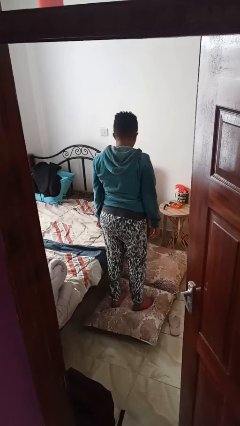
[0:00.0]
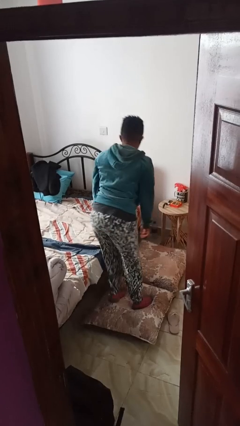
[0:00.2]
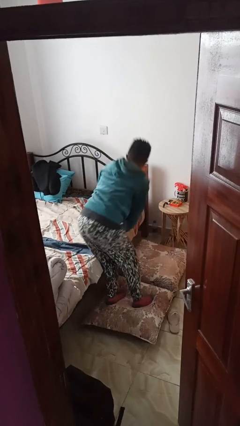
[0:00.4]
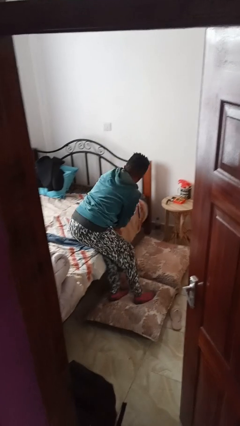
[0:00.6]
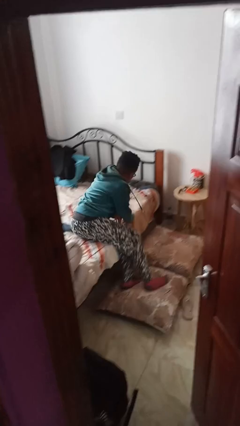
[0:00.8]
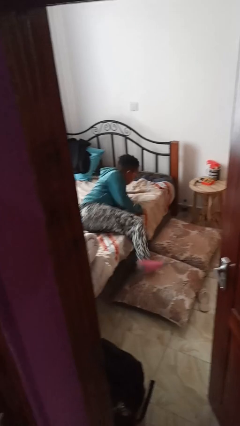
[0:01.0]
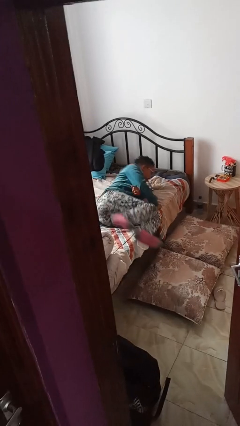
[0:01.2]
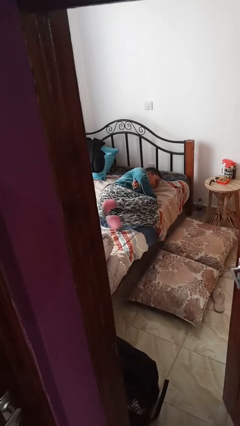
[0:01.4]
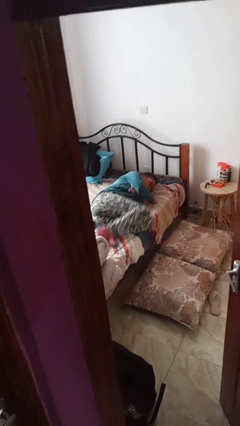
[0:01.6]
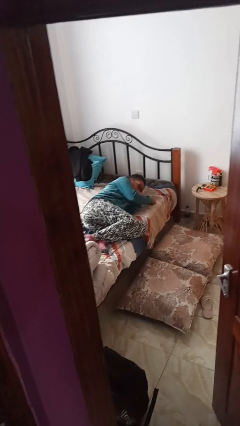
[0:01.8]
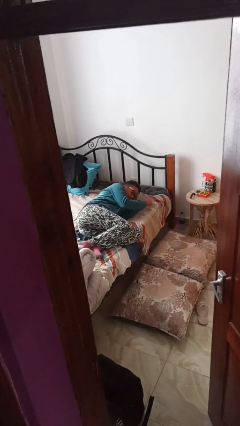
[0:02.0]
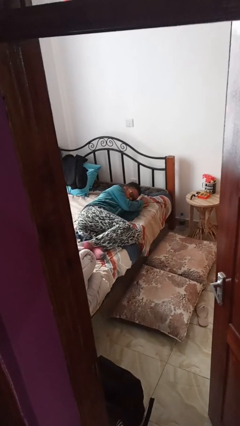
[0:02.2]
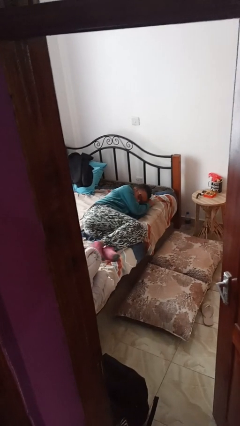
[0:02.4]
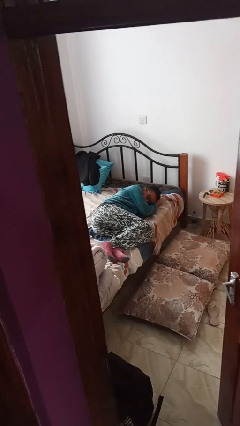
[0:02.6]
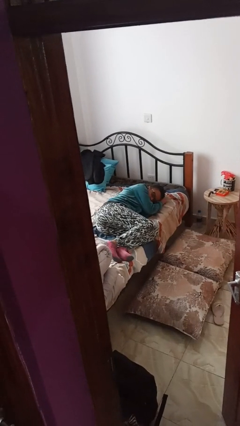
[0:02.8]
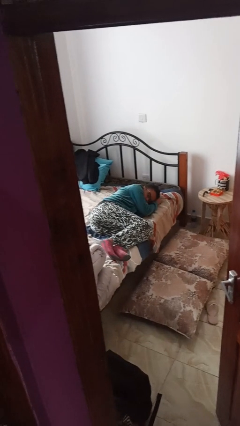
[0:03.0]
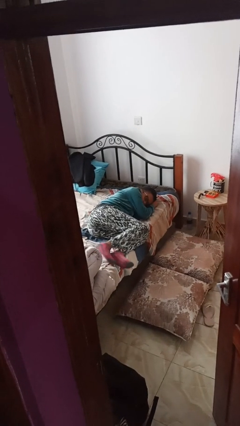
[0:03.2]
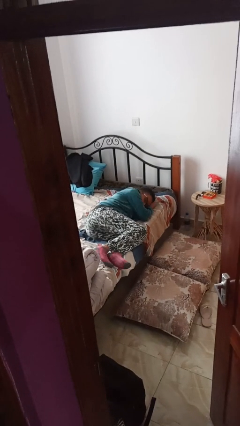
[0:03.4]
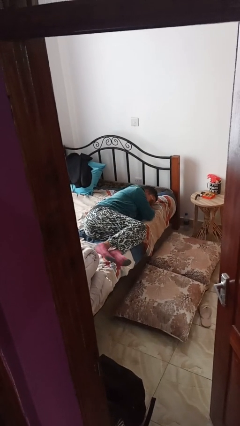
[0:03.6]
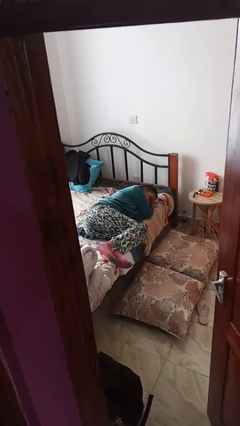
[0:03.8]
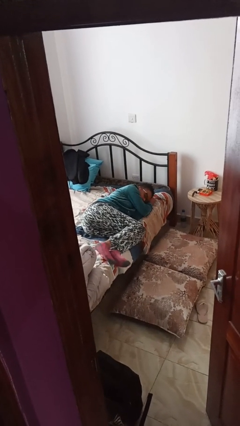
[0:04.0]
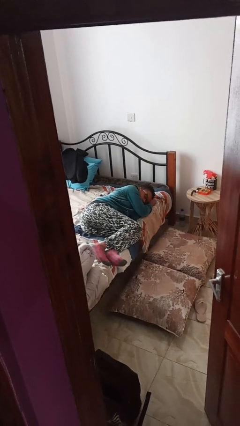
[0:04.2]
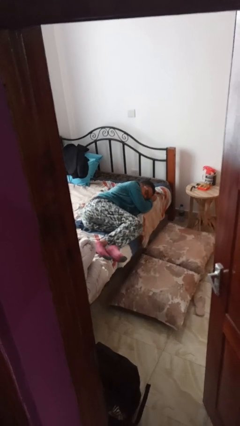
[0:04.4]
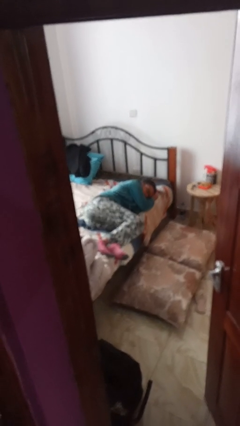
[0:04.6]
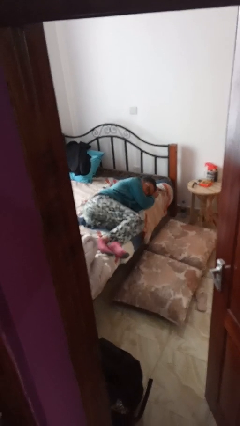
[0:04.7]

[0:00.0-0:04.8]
person lies down on bed

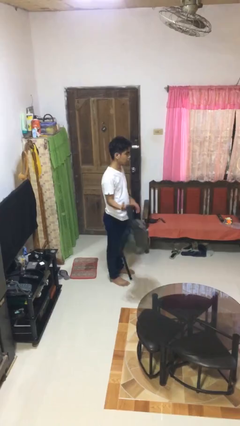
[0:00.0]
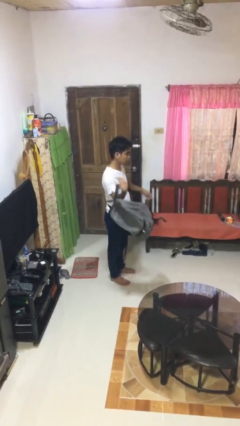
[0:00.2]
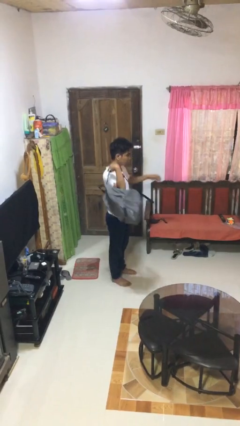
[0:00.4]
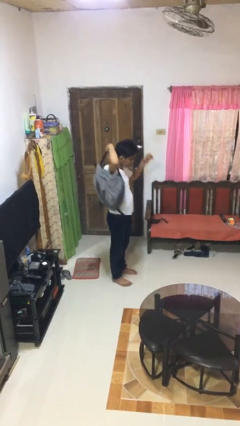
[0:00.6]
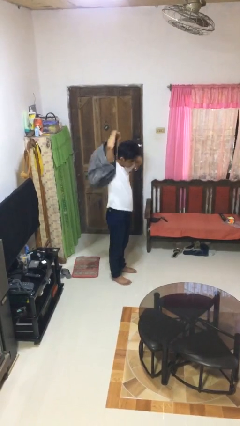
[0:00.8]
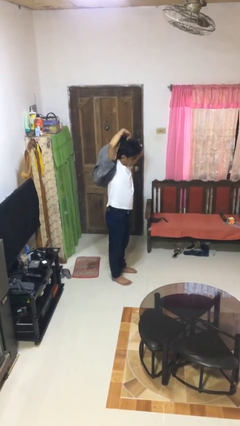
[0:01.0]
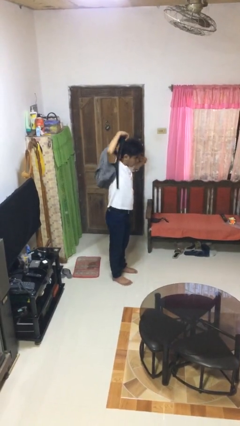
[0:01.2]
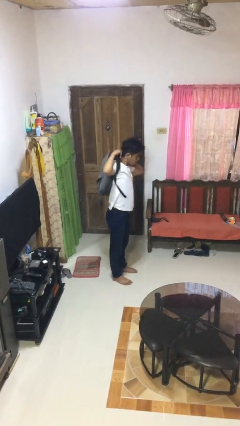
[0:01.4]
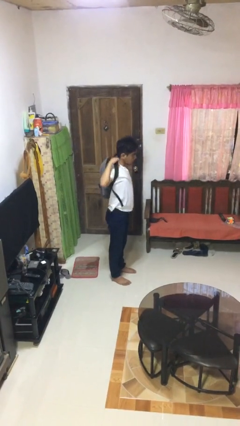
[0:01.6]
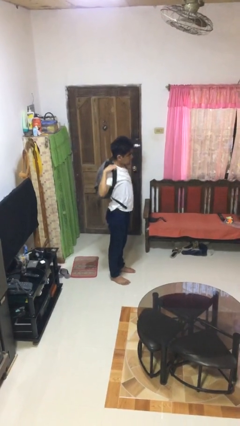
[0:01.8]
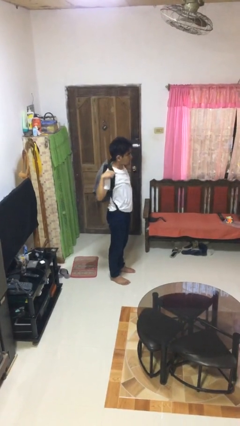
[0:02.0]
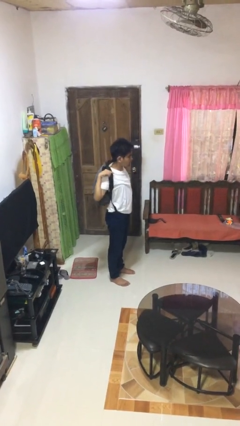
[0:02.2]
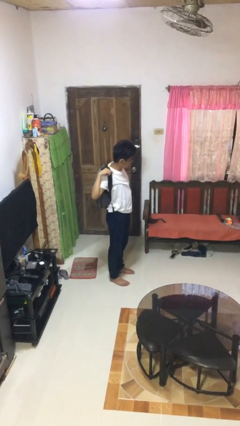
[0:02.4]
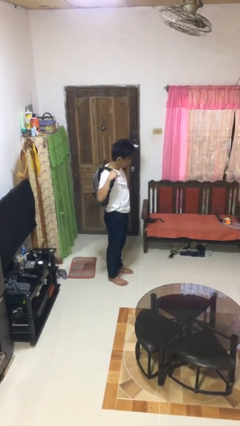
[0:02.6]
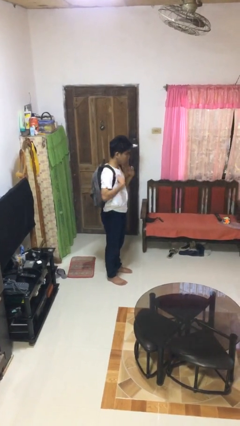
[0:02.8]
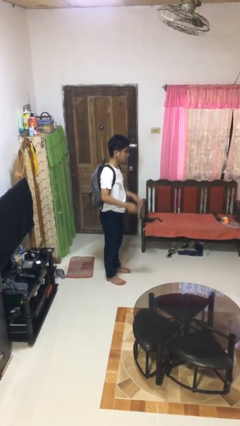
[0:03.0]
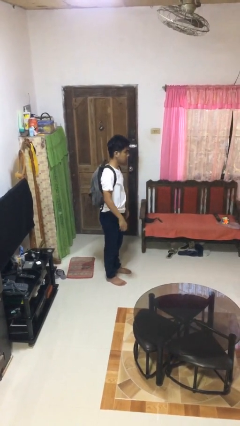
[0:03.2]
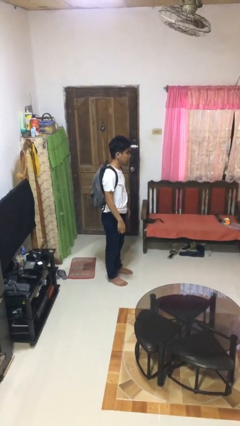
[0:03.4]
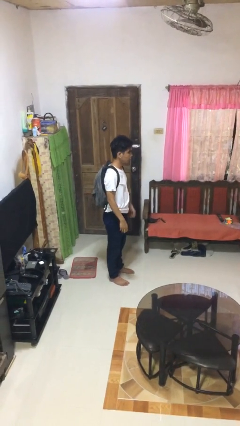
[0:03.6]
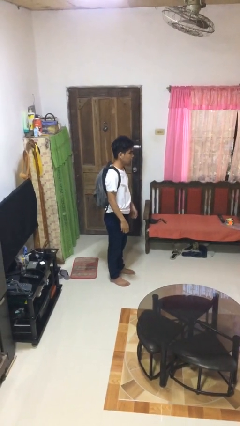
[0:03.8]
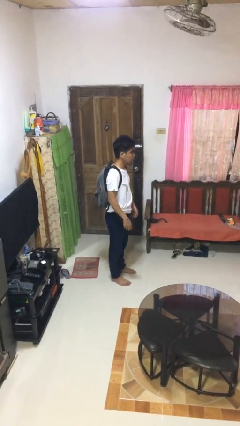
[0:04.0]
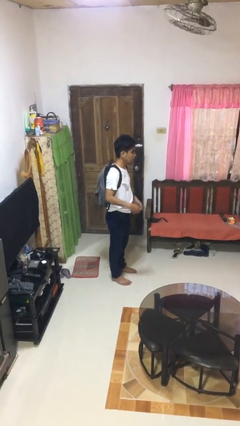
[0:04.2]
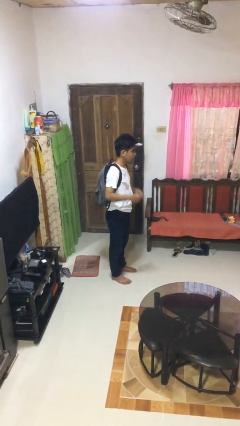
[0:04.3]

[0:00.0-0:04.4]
person puts on backpack

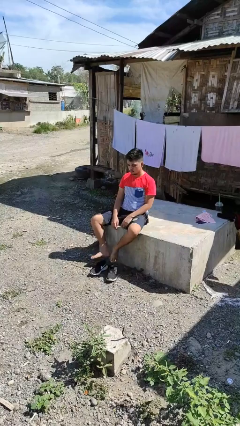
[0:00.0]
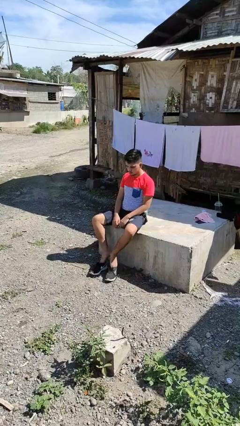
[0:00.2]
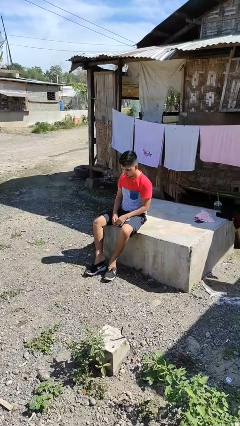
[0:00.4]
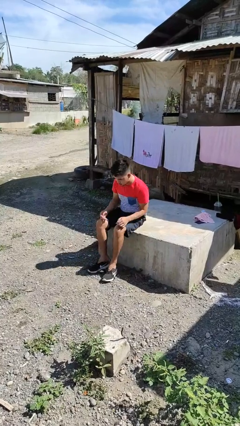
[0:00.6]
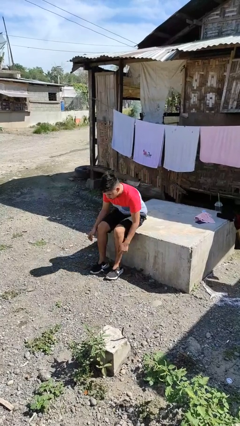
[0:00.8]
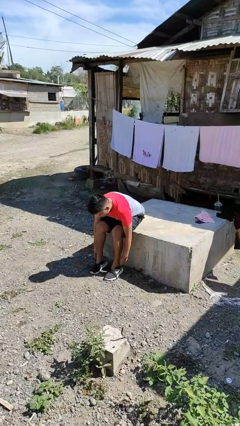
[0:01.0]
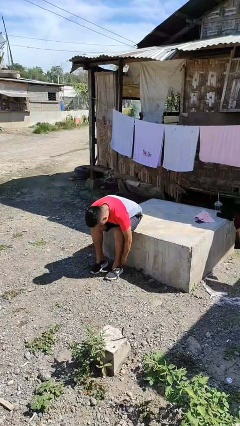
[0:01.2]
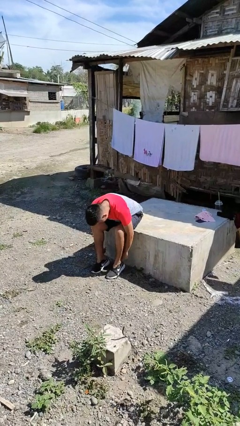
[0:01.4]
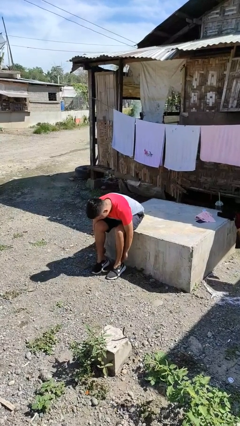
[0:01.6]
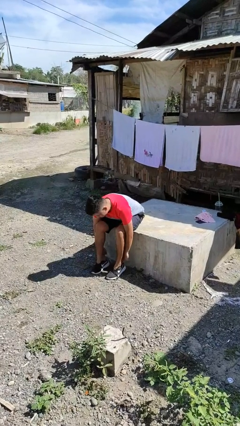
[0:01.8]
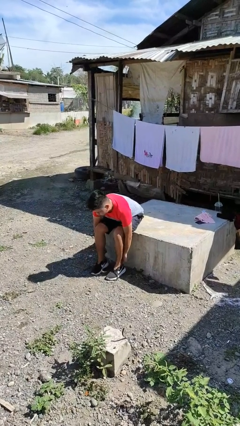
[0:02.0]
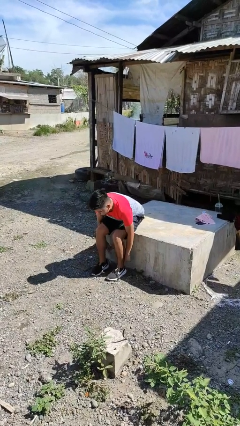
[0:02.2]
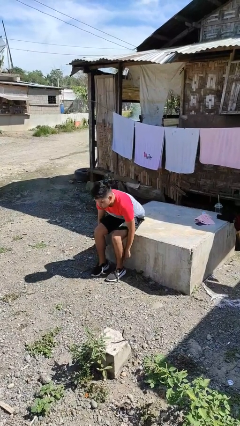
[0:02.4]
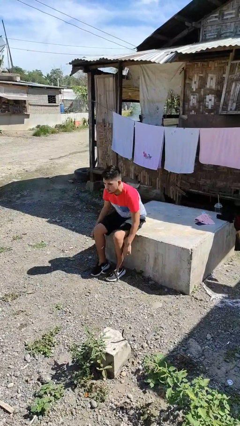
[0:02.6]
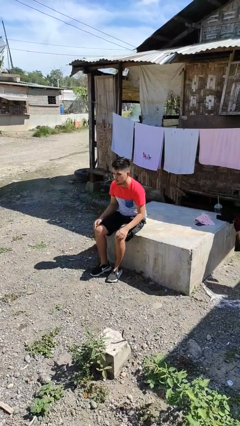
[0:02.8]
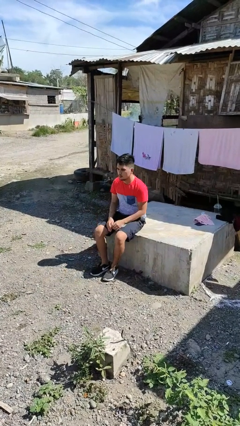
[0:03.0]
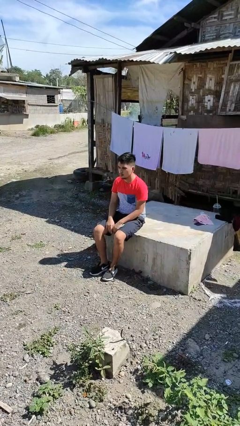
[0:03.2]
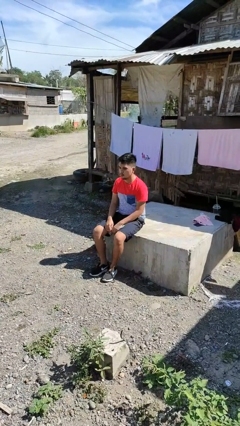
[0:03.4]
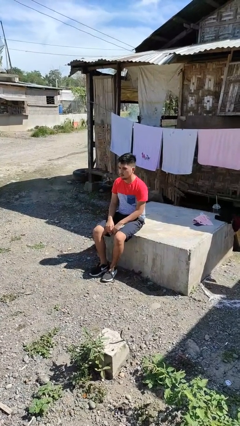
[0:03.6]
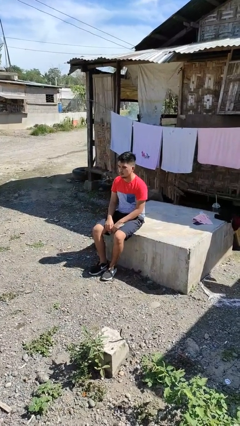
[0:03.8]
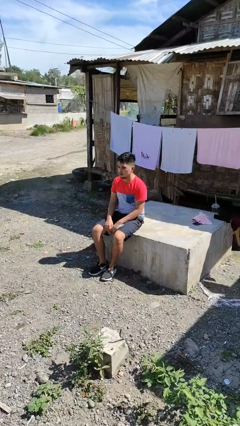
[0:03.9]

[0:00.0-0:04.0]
person puts on shoes

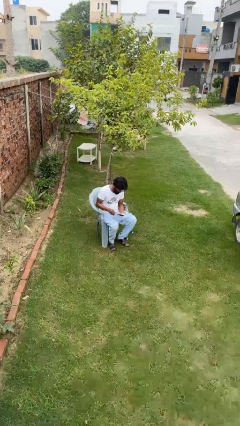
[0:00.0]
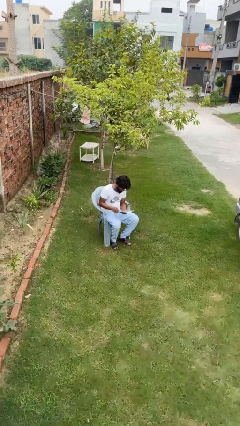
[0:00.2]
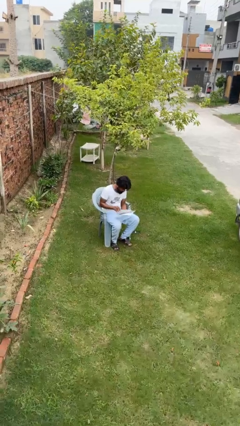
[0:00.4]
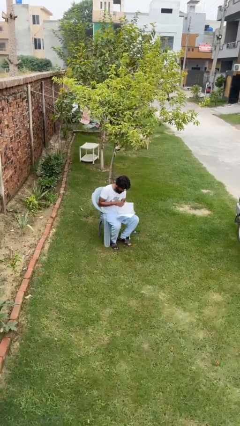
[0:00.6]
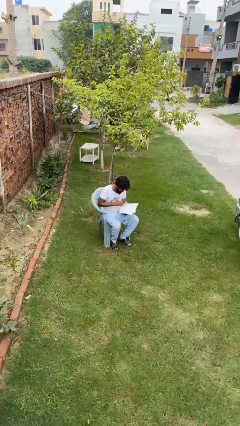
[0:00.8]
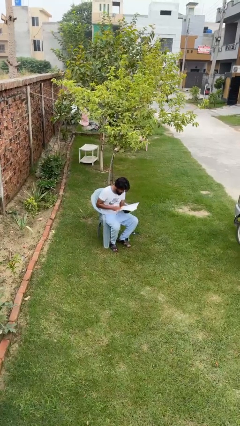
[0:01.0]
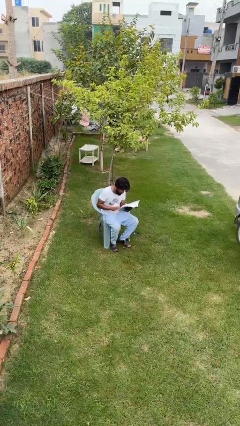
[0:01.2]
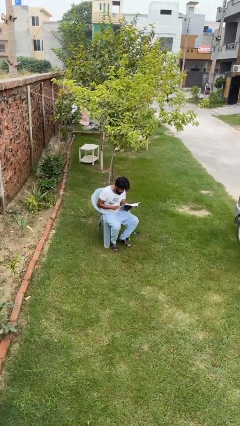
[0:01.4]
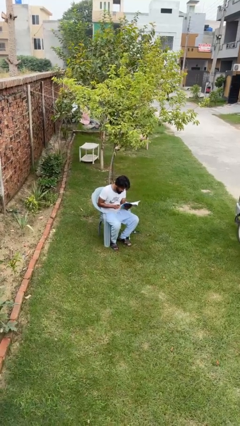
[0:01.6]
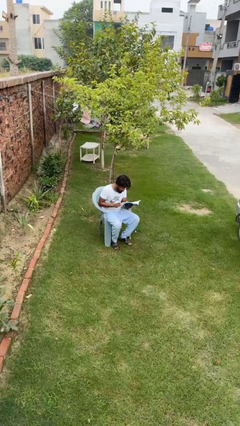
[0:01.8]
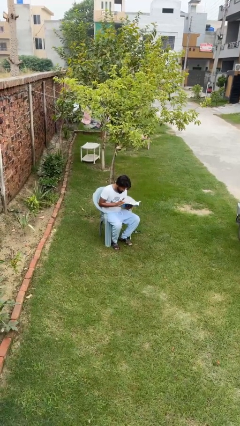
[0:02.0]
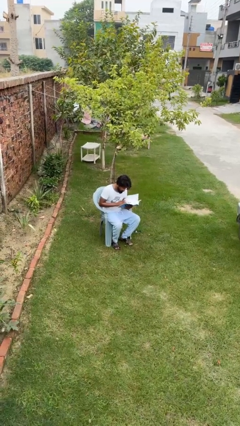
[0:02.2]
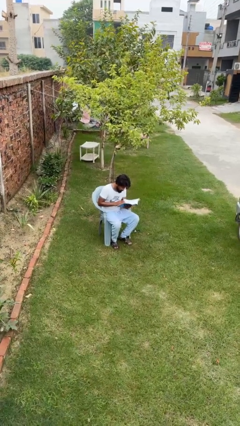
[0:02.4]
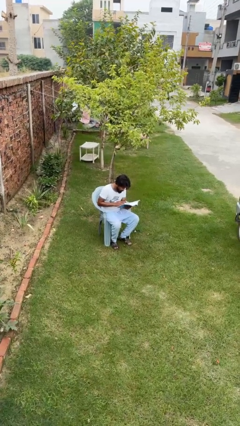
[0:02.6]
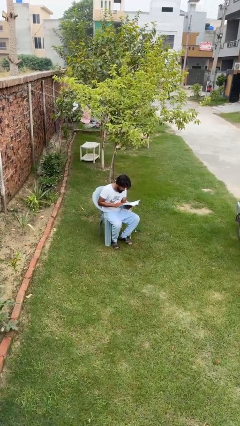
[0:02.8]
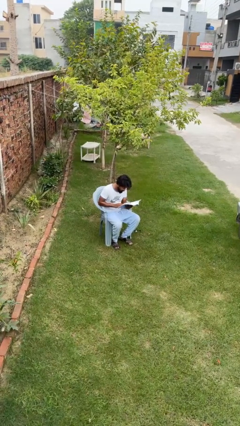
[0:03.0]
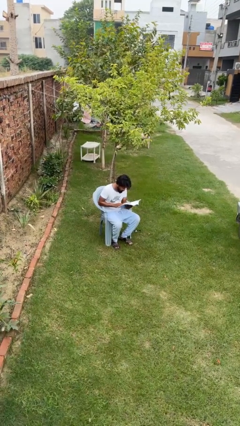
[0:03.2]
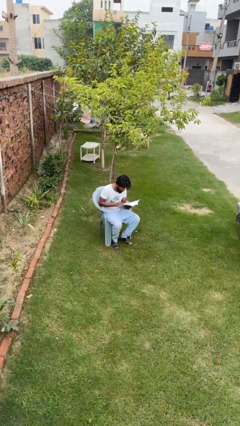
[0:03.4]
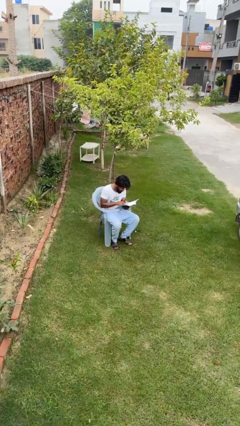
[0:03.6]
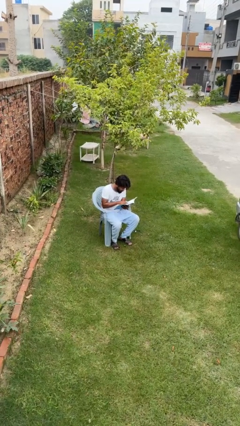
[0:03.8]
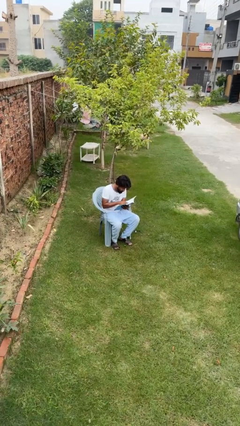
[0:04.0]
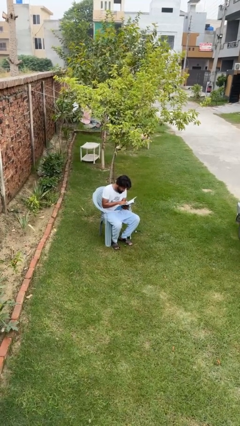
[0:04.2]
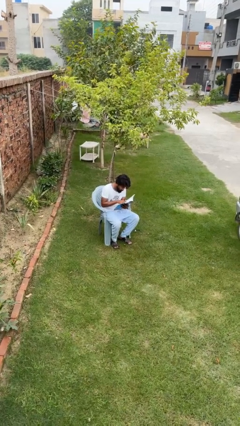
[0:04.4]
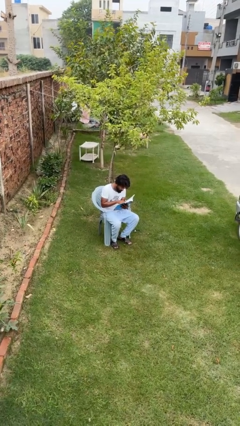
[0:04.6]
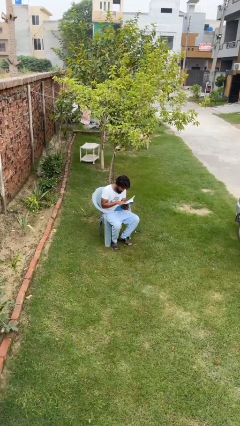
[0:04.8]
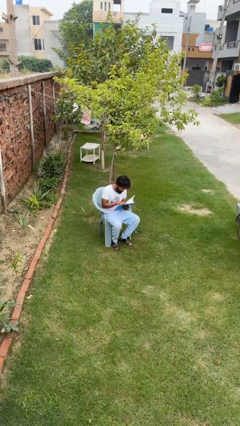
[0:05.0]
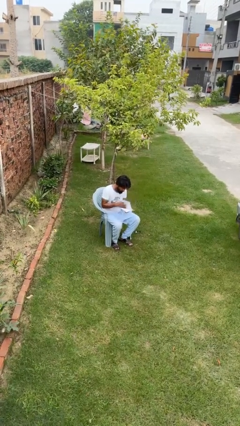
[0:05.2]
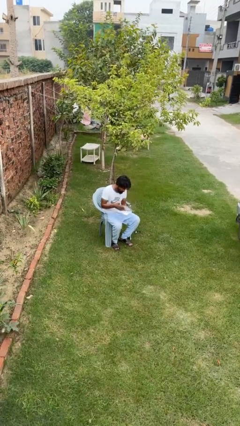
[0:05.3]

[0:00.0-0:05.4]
person reads book
